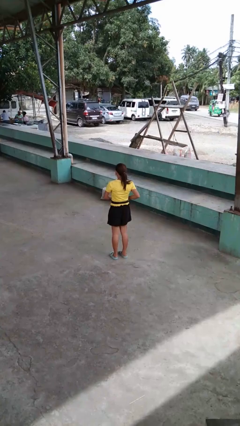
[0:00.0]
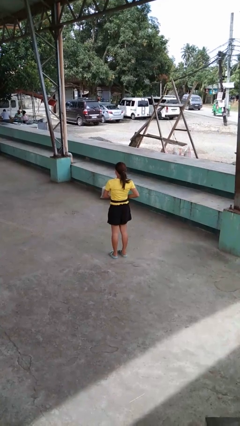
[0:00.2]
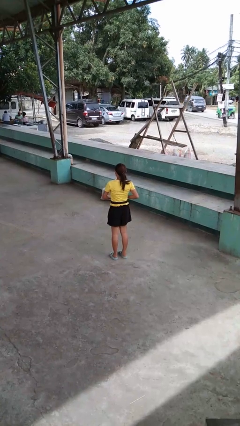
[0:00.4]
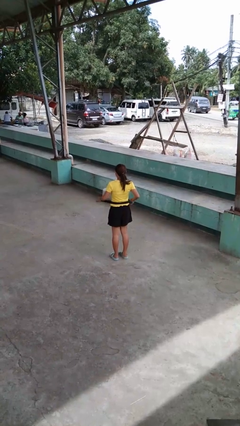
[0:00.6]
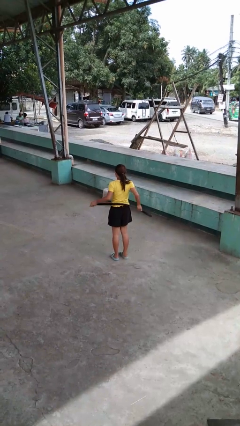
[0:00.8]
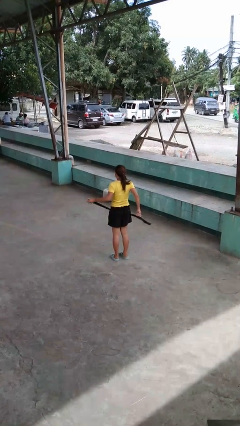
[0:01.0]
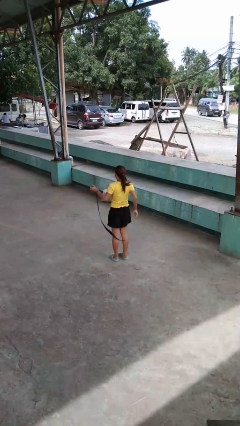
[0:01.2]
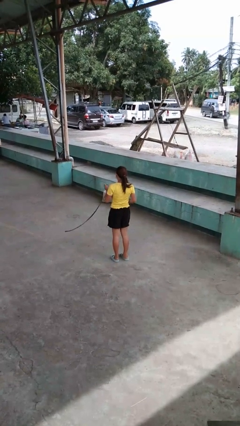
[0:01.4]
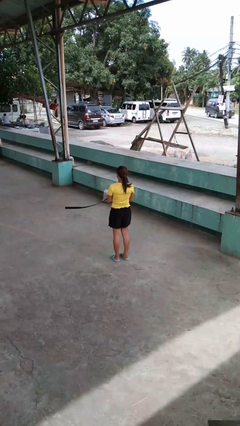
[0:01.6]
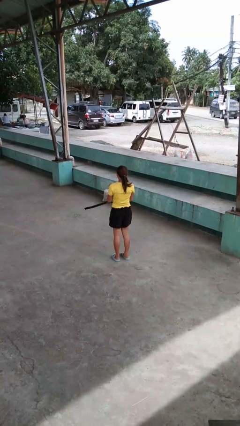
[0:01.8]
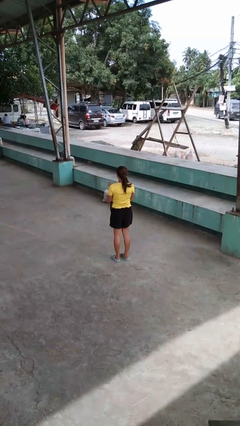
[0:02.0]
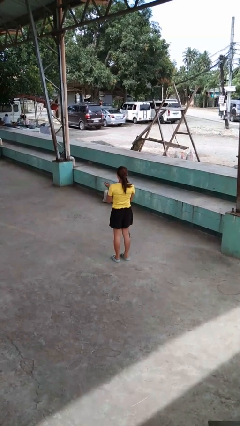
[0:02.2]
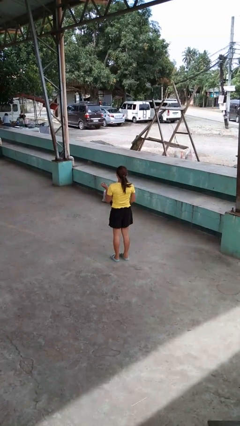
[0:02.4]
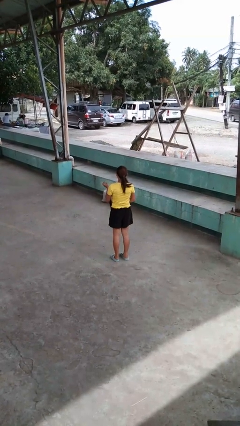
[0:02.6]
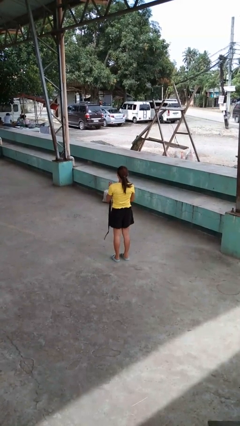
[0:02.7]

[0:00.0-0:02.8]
person takes off belt

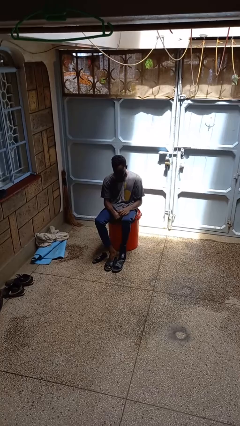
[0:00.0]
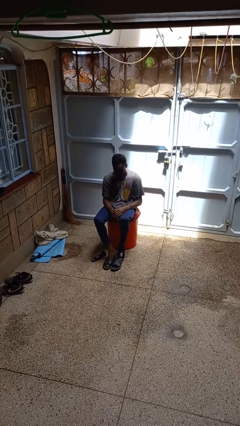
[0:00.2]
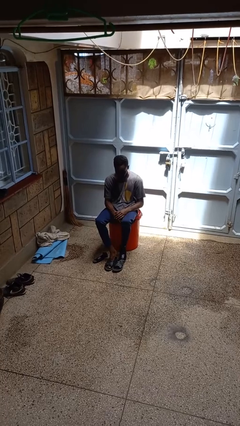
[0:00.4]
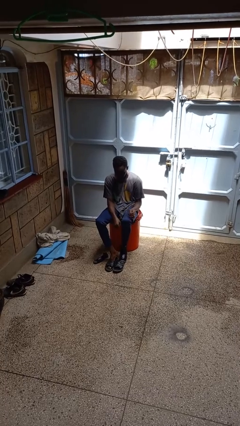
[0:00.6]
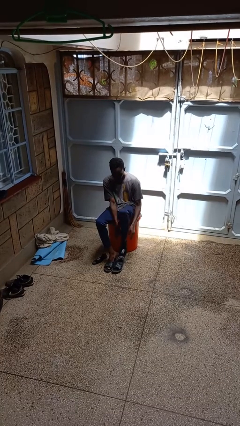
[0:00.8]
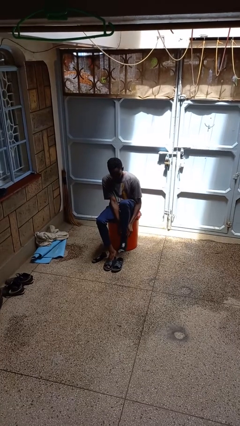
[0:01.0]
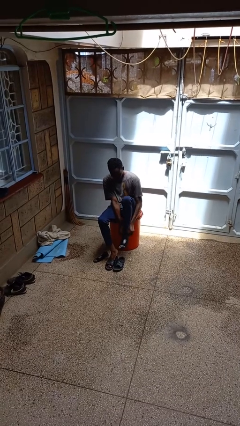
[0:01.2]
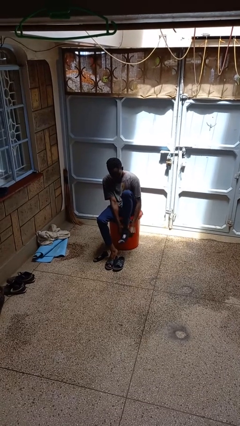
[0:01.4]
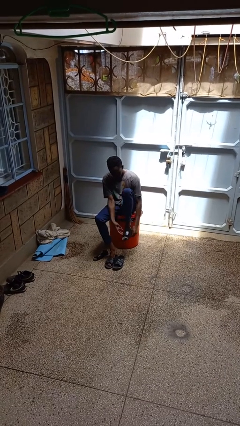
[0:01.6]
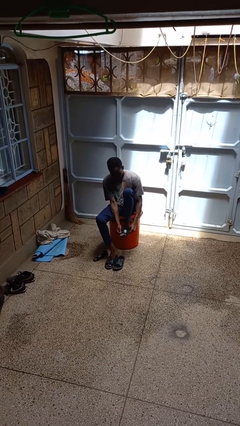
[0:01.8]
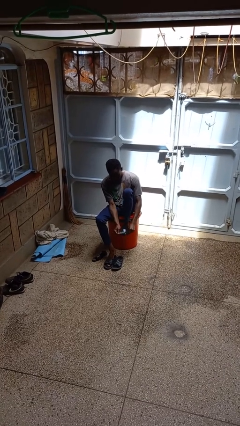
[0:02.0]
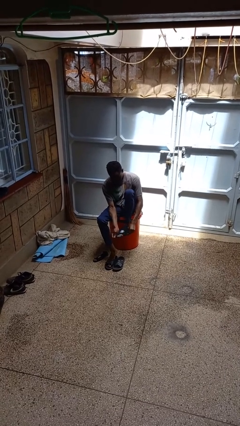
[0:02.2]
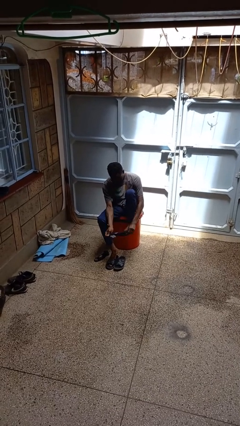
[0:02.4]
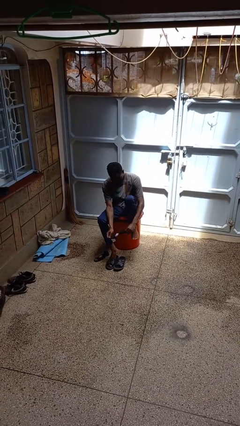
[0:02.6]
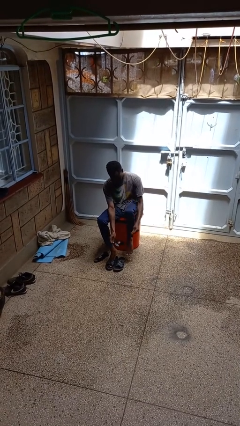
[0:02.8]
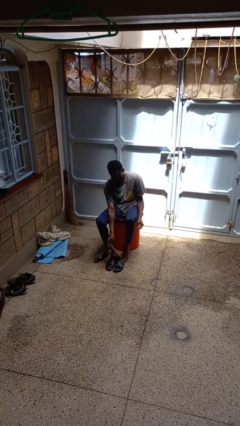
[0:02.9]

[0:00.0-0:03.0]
person takes off socks

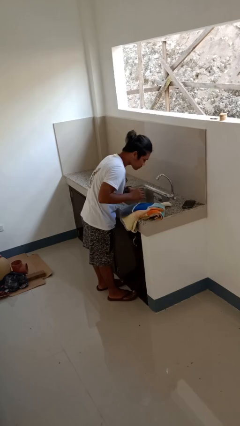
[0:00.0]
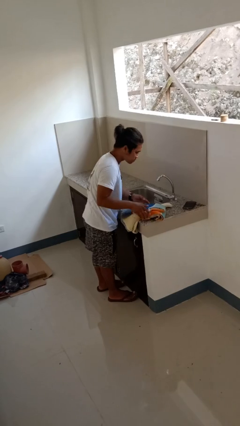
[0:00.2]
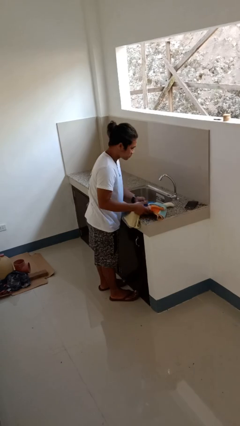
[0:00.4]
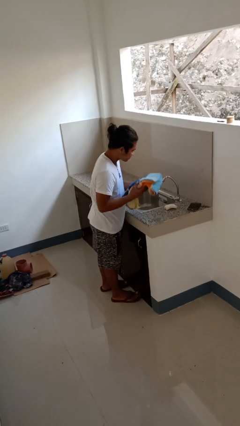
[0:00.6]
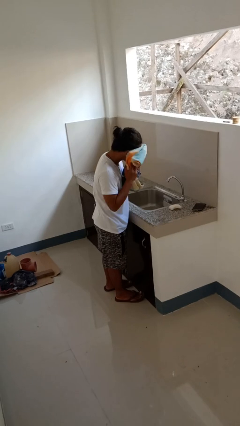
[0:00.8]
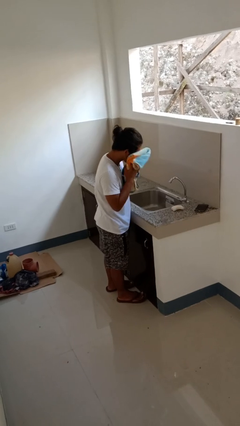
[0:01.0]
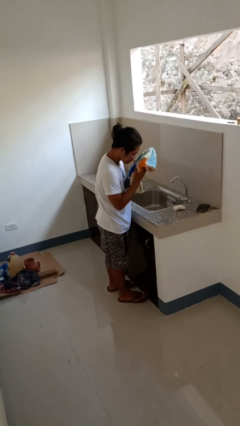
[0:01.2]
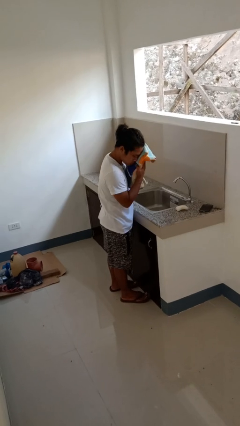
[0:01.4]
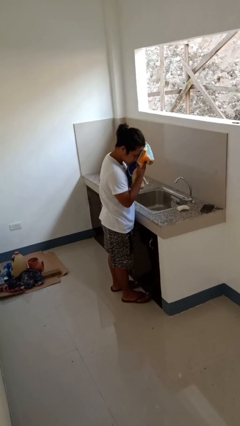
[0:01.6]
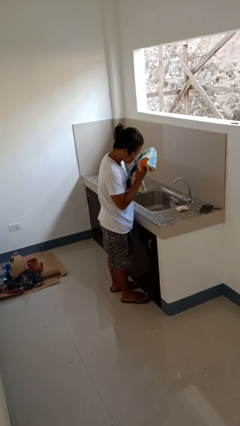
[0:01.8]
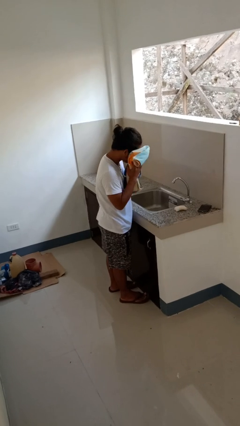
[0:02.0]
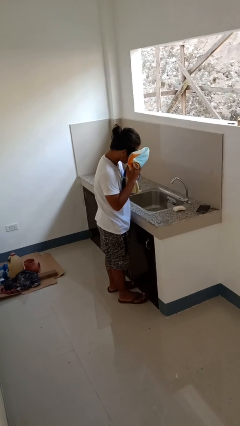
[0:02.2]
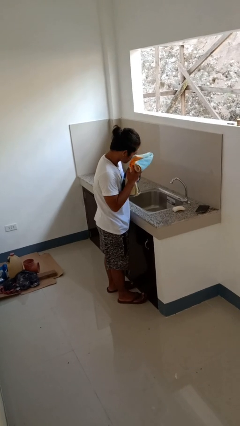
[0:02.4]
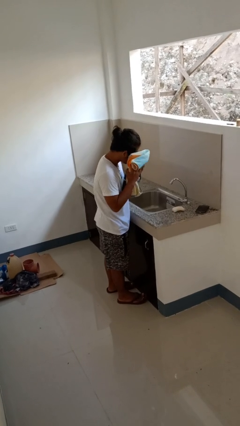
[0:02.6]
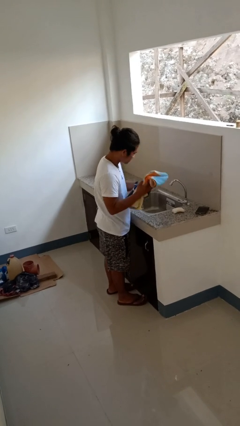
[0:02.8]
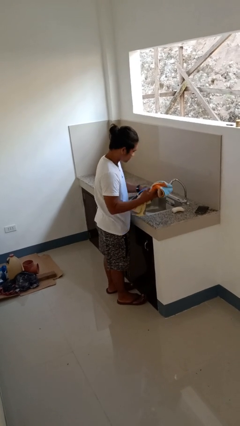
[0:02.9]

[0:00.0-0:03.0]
person dries face with towel

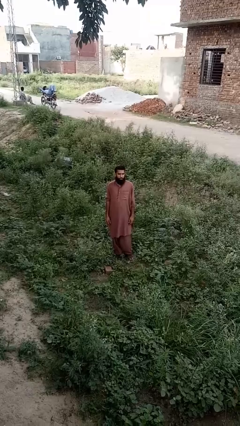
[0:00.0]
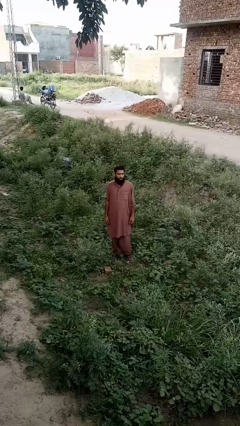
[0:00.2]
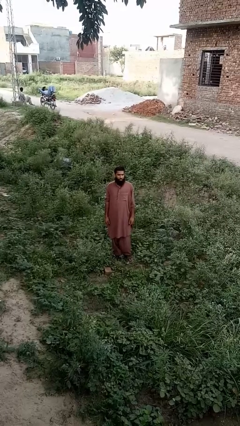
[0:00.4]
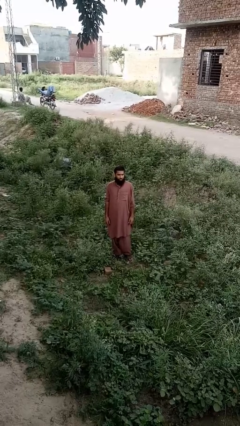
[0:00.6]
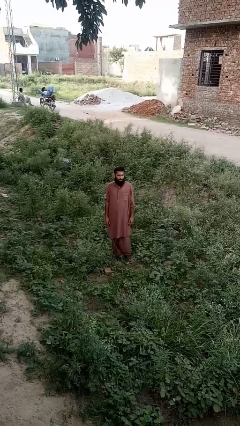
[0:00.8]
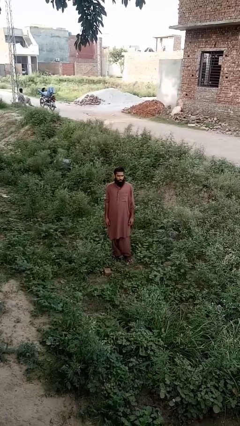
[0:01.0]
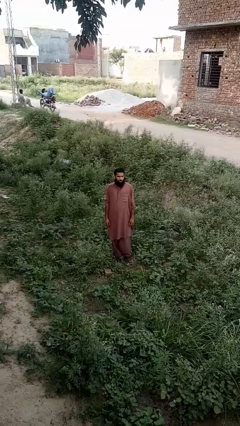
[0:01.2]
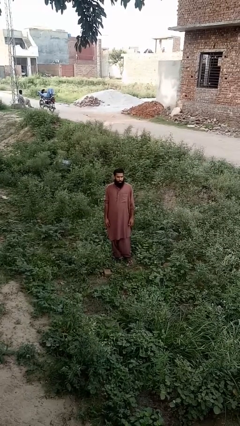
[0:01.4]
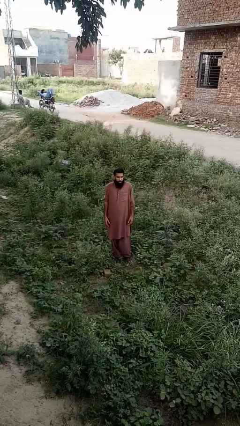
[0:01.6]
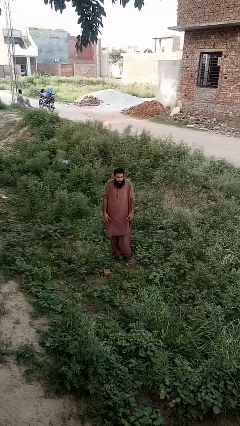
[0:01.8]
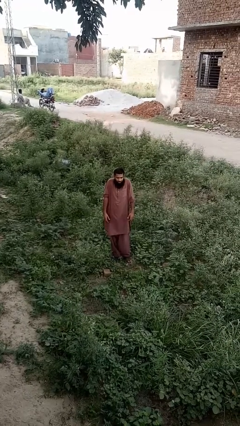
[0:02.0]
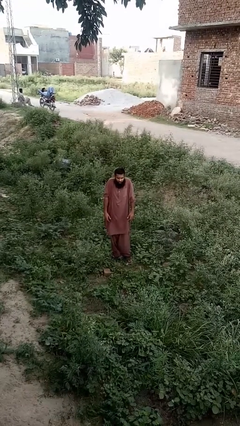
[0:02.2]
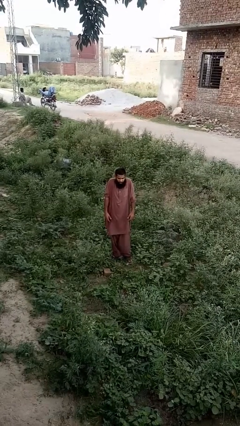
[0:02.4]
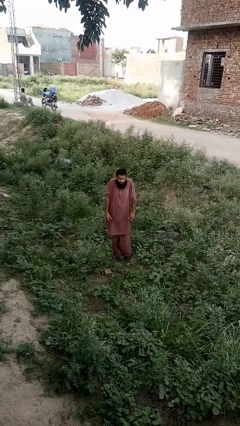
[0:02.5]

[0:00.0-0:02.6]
person shrugs

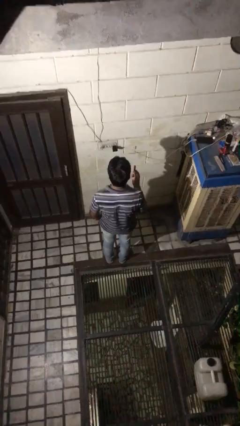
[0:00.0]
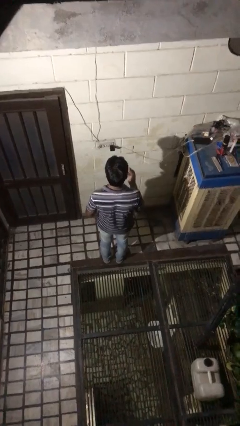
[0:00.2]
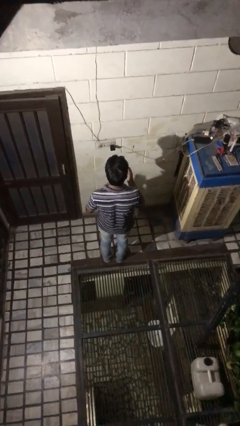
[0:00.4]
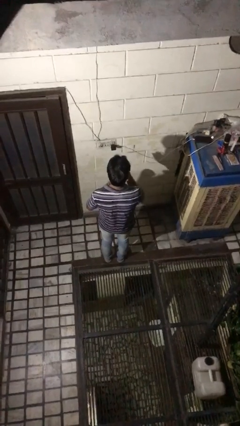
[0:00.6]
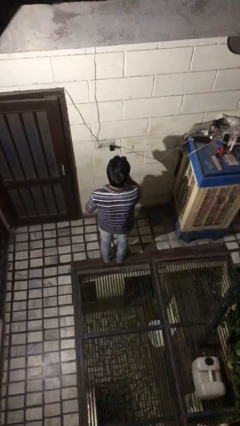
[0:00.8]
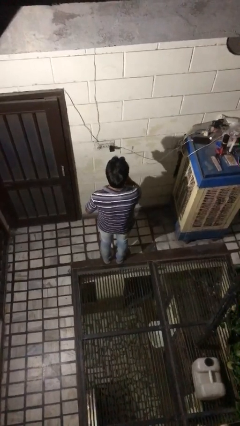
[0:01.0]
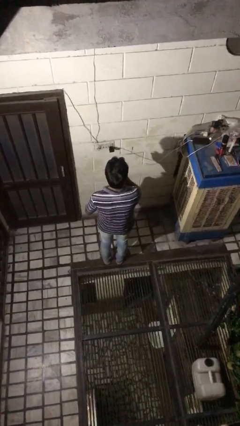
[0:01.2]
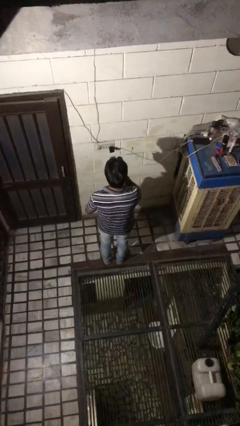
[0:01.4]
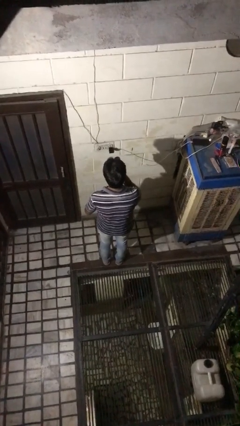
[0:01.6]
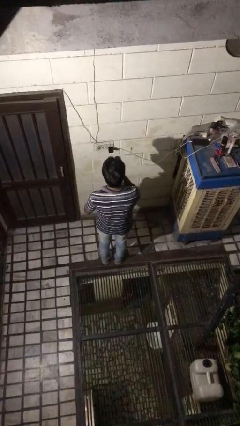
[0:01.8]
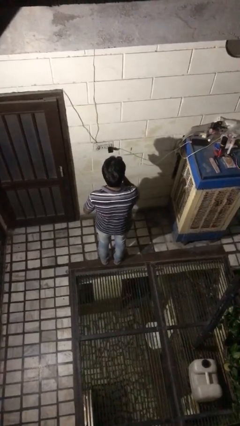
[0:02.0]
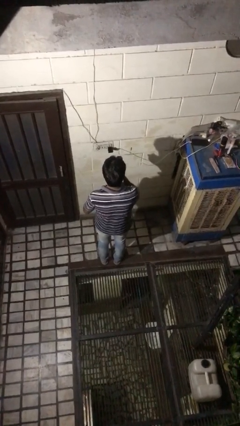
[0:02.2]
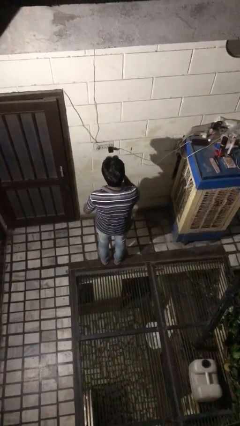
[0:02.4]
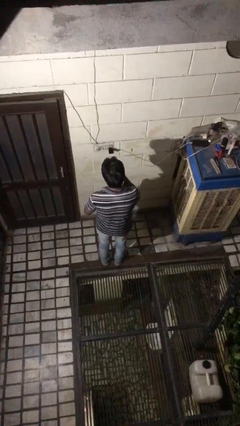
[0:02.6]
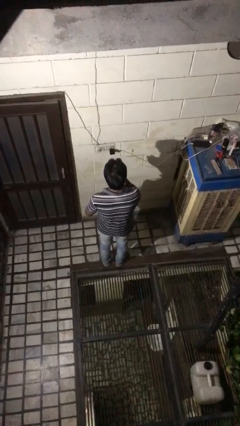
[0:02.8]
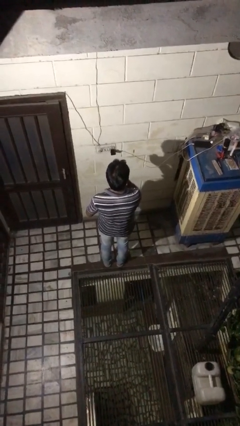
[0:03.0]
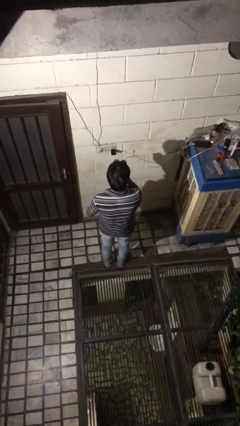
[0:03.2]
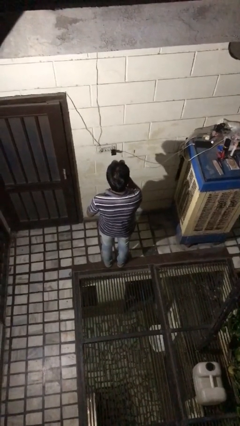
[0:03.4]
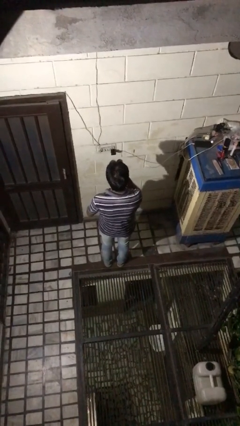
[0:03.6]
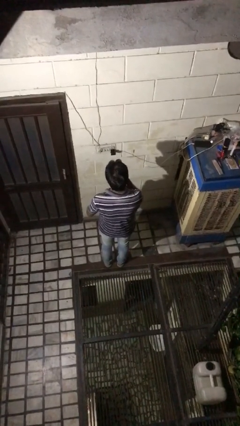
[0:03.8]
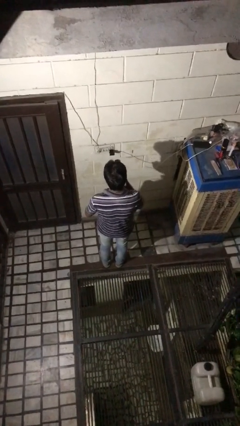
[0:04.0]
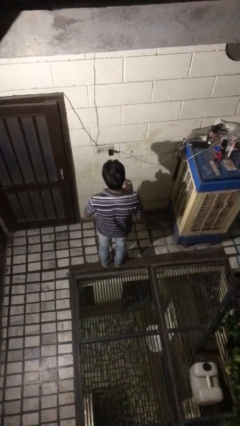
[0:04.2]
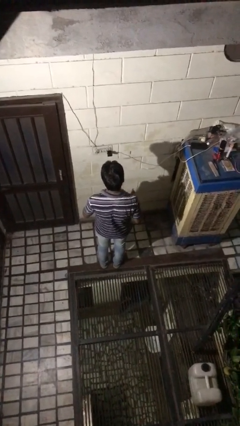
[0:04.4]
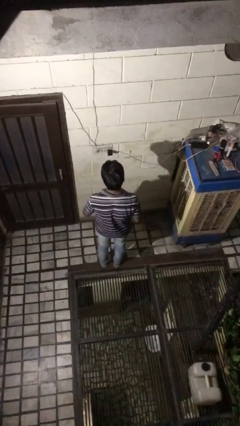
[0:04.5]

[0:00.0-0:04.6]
person applies lip makeup

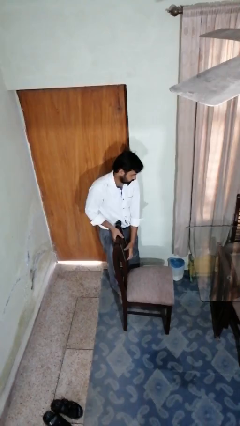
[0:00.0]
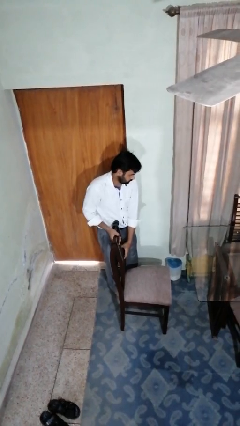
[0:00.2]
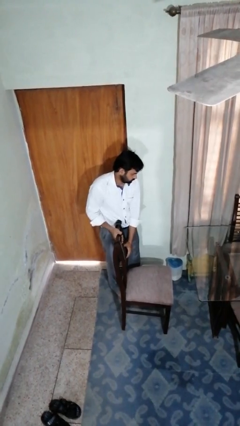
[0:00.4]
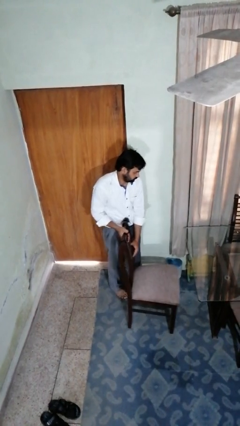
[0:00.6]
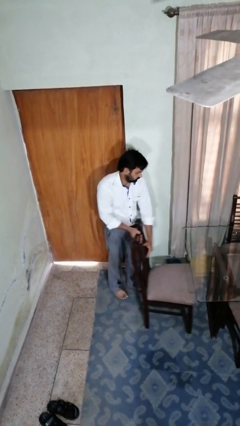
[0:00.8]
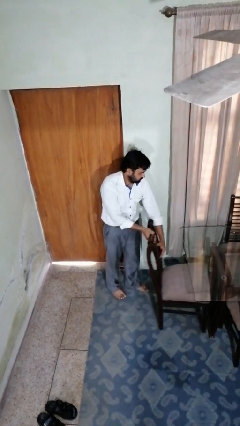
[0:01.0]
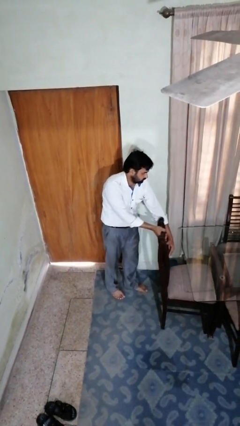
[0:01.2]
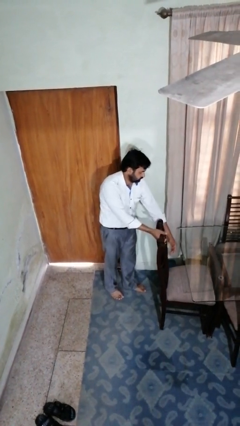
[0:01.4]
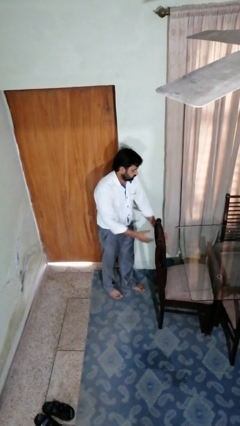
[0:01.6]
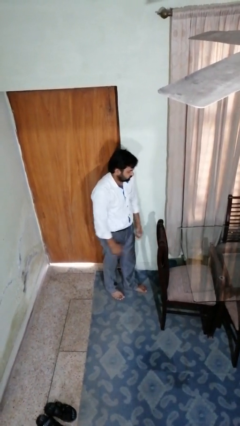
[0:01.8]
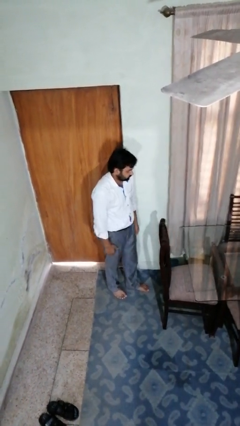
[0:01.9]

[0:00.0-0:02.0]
person pushes in chair
